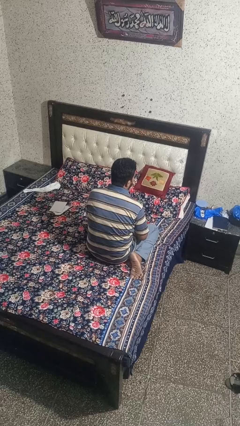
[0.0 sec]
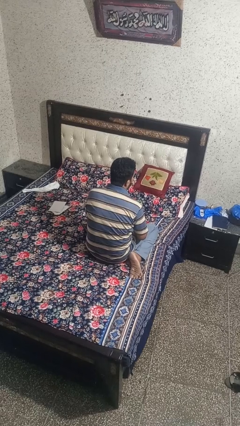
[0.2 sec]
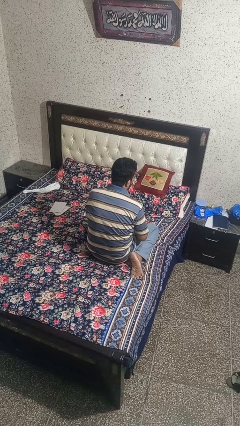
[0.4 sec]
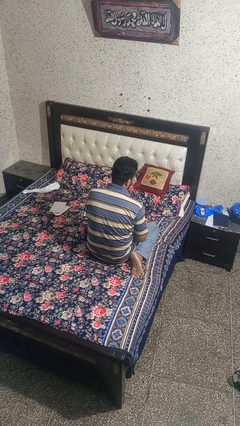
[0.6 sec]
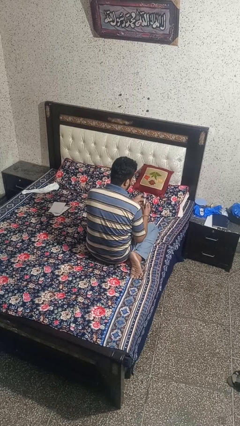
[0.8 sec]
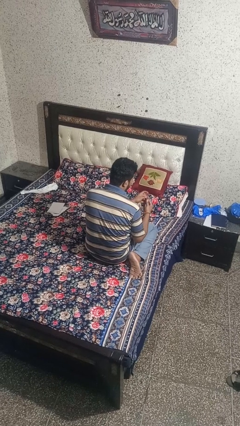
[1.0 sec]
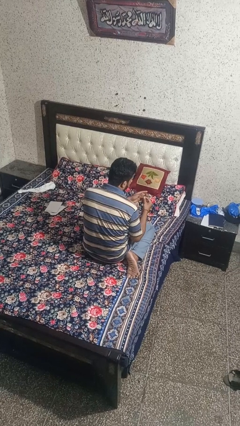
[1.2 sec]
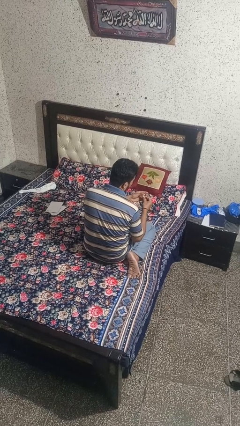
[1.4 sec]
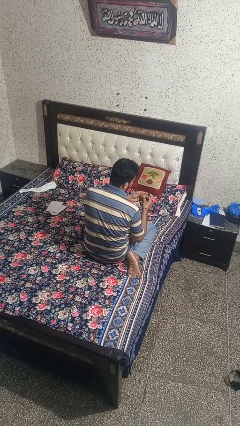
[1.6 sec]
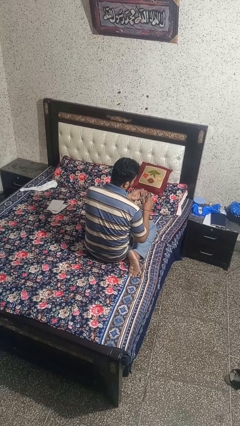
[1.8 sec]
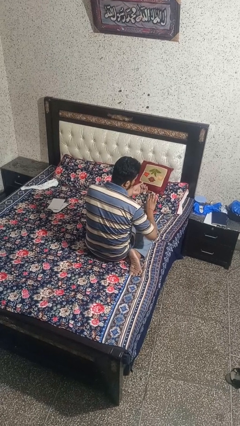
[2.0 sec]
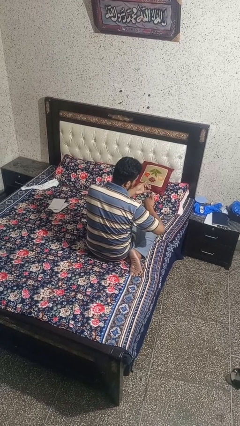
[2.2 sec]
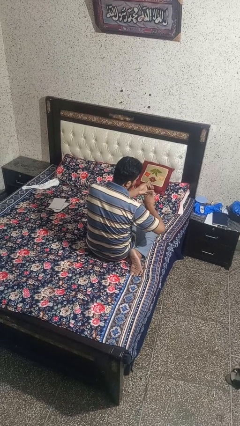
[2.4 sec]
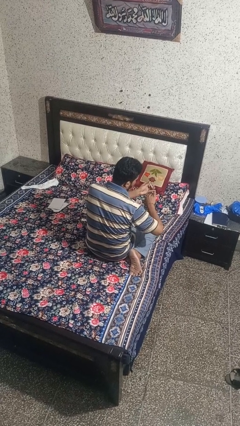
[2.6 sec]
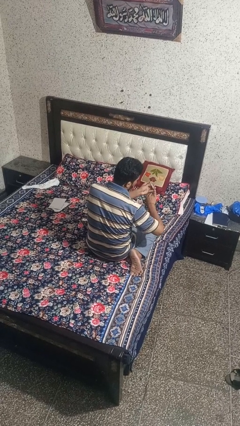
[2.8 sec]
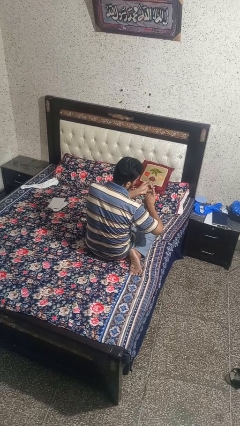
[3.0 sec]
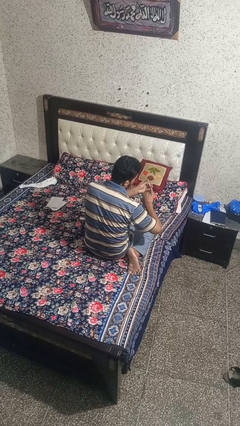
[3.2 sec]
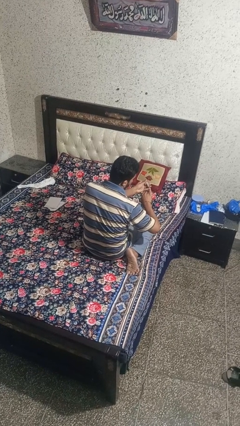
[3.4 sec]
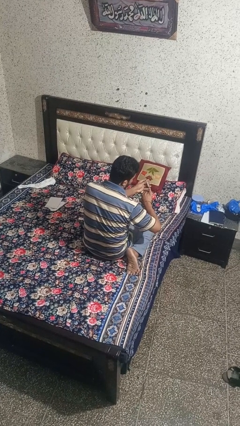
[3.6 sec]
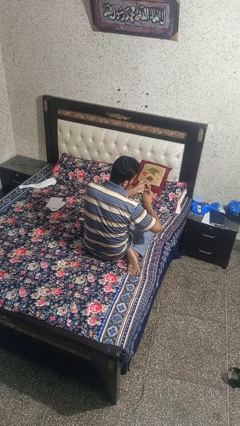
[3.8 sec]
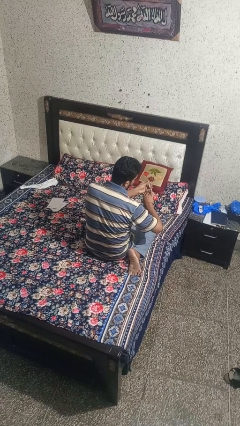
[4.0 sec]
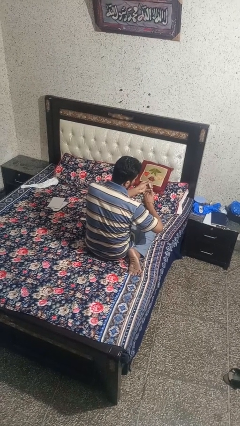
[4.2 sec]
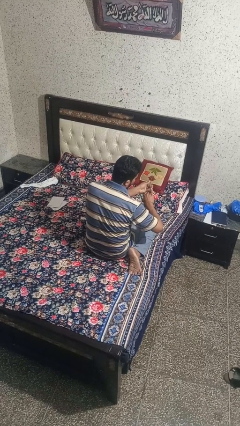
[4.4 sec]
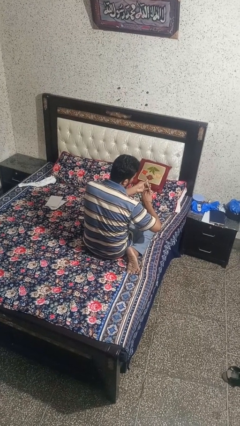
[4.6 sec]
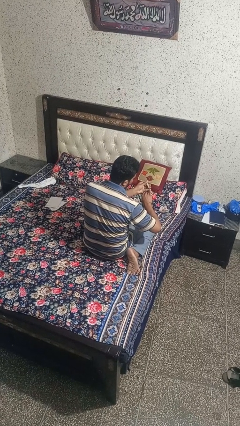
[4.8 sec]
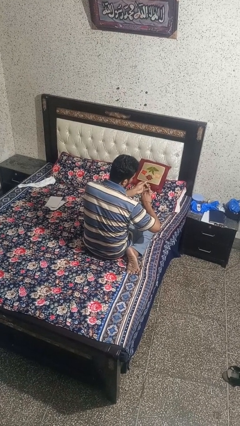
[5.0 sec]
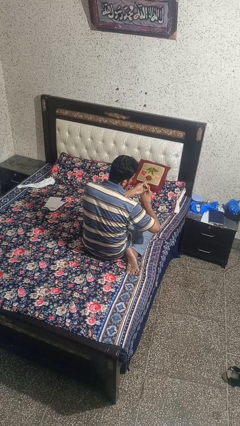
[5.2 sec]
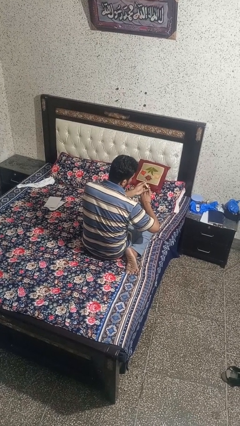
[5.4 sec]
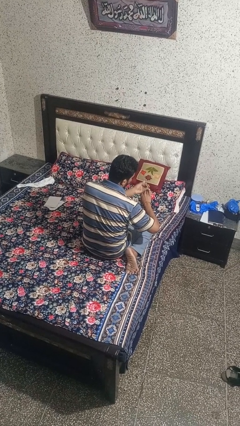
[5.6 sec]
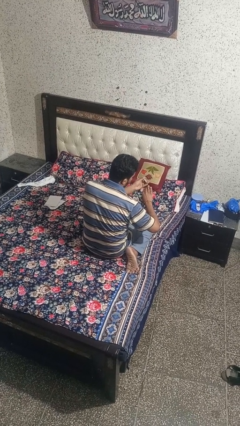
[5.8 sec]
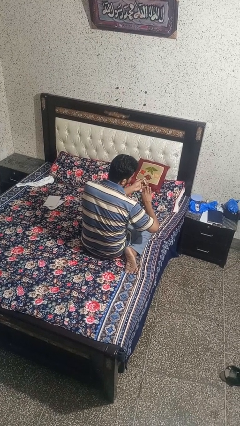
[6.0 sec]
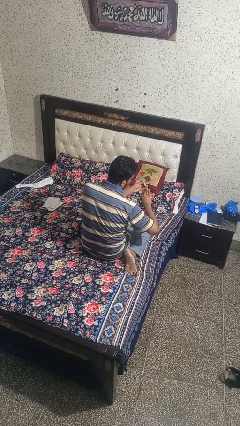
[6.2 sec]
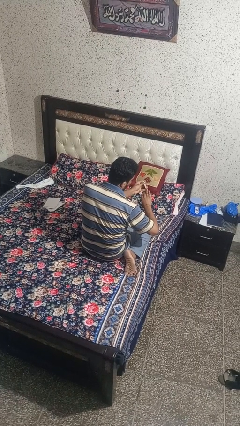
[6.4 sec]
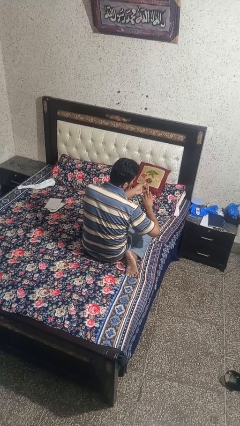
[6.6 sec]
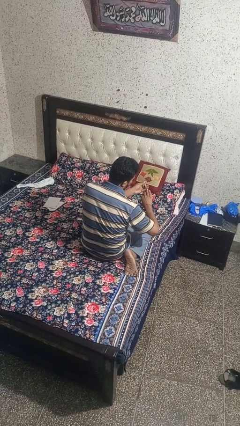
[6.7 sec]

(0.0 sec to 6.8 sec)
person clips fingernails

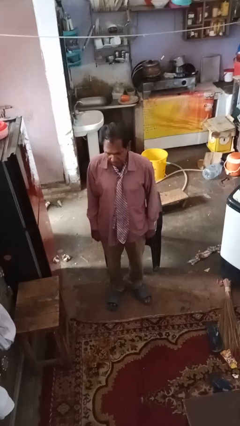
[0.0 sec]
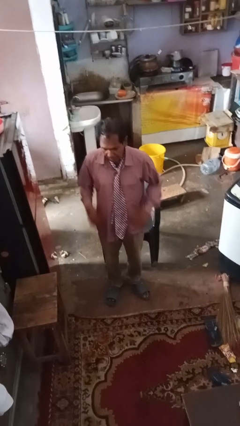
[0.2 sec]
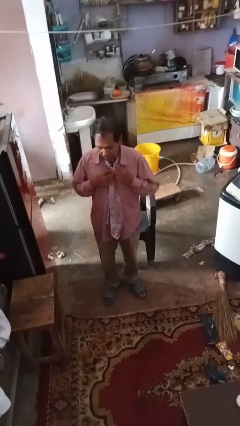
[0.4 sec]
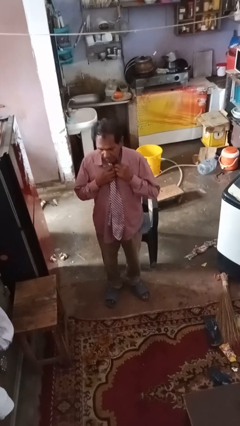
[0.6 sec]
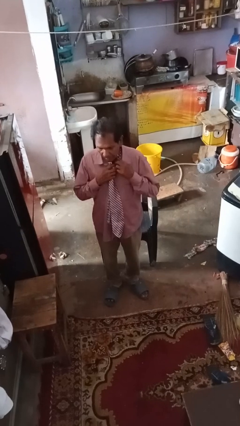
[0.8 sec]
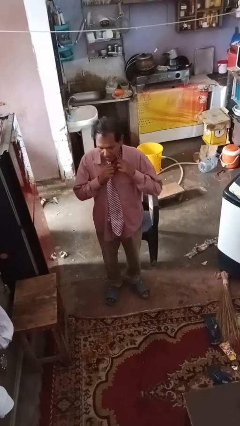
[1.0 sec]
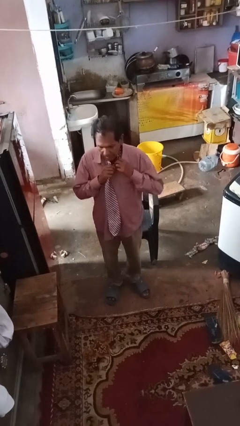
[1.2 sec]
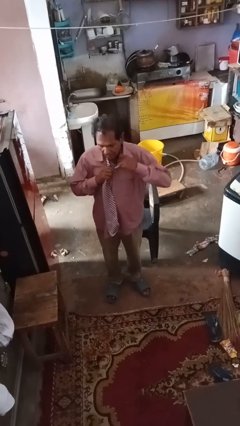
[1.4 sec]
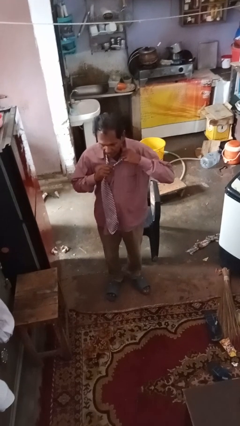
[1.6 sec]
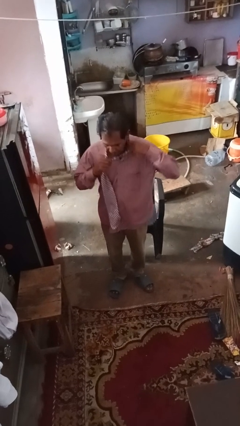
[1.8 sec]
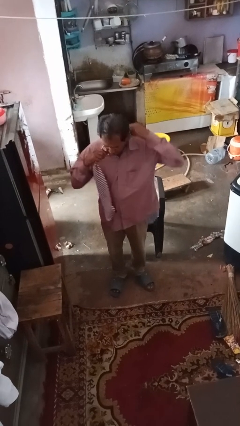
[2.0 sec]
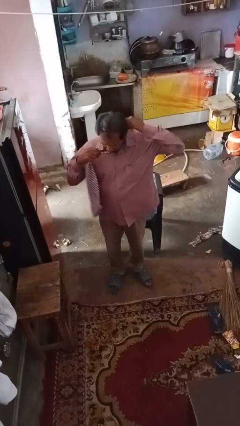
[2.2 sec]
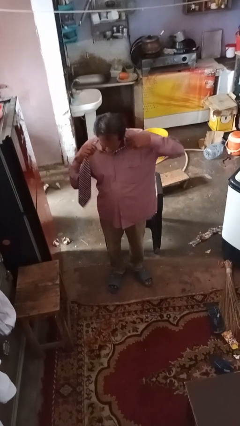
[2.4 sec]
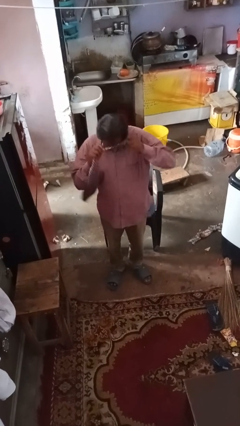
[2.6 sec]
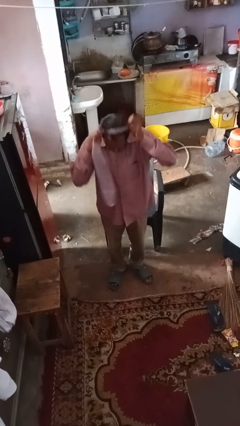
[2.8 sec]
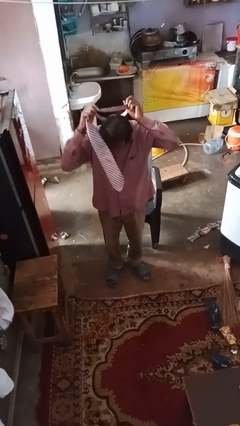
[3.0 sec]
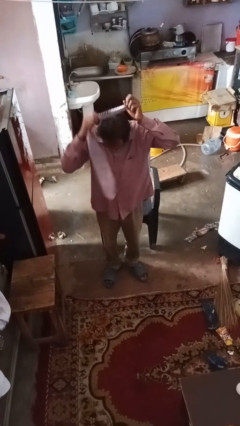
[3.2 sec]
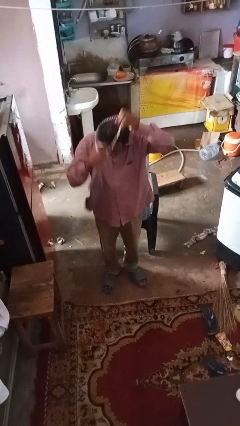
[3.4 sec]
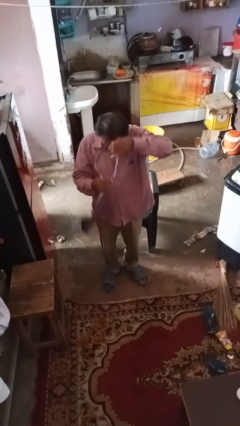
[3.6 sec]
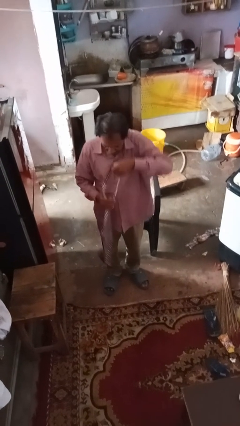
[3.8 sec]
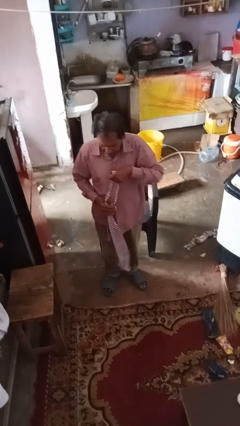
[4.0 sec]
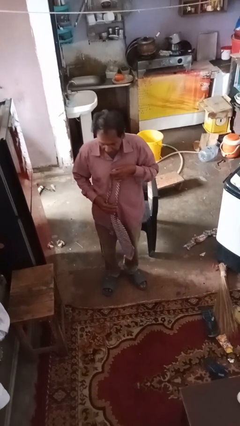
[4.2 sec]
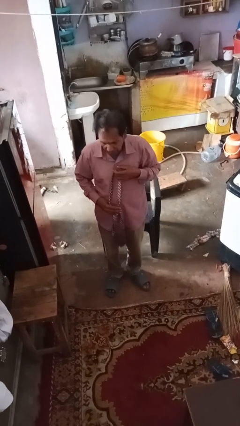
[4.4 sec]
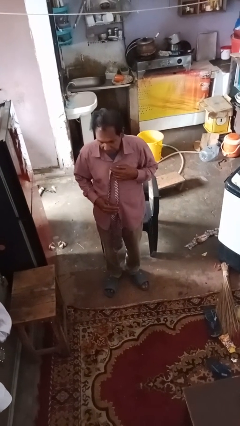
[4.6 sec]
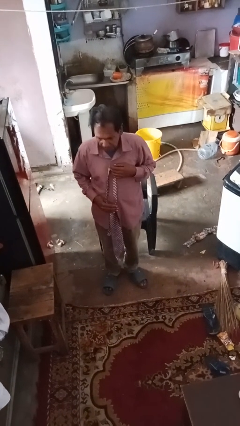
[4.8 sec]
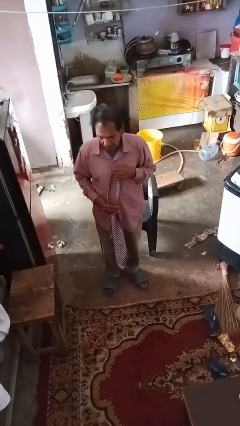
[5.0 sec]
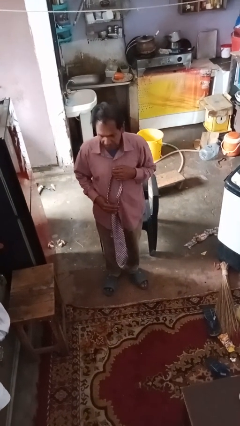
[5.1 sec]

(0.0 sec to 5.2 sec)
person takes off necktie

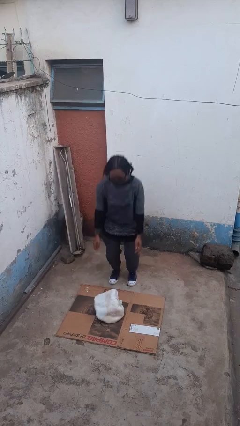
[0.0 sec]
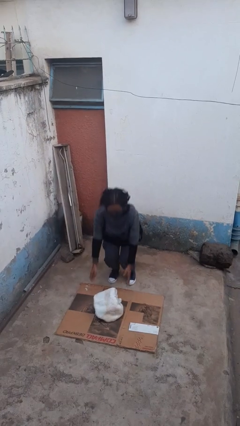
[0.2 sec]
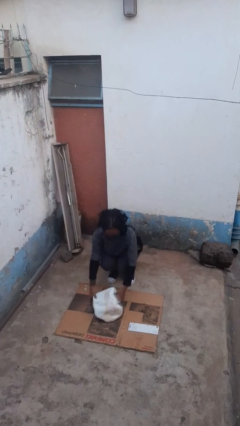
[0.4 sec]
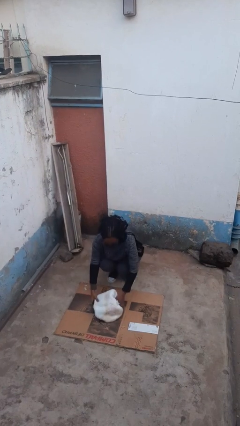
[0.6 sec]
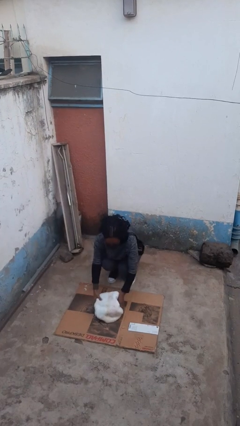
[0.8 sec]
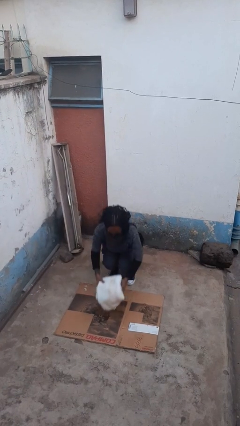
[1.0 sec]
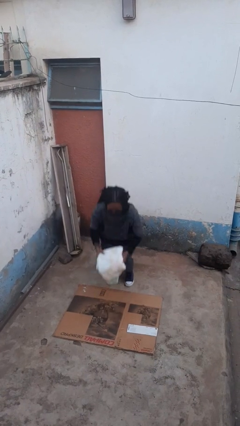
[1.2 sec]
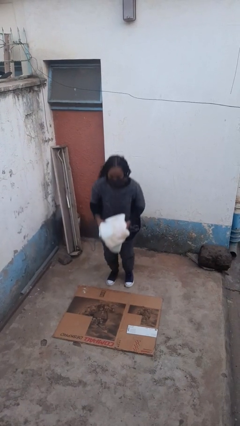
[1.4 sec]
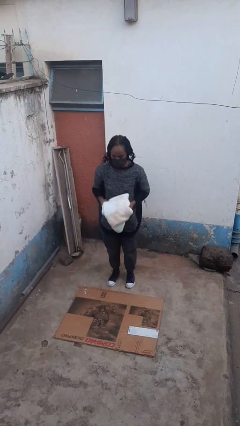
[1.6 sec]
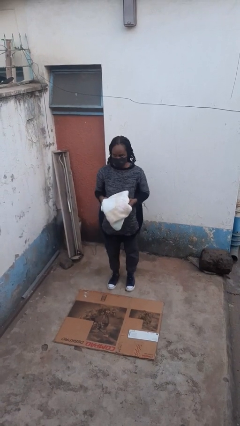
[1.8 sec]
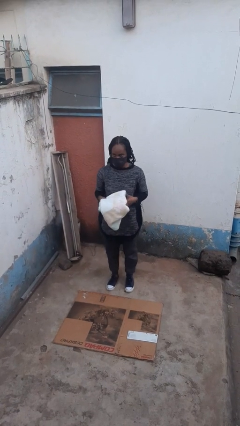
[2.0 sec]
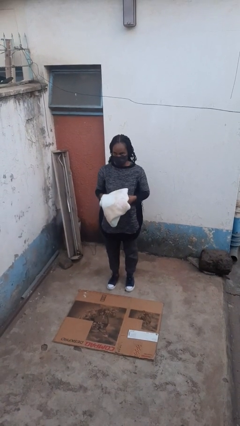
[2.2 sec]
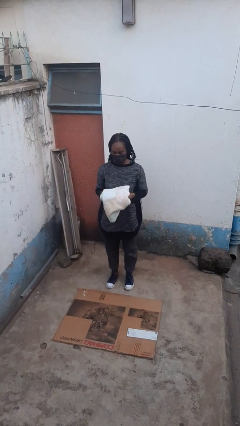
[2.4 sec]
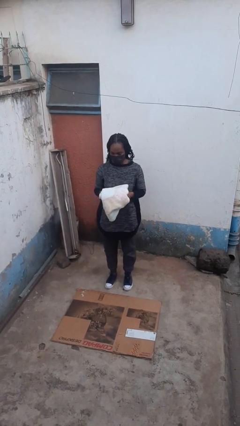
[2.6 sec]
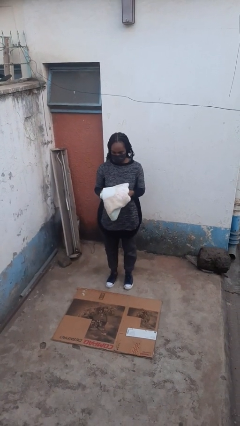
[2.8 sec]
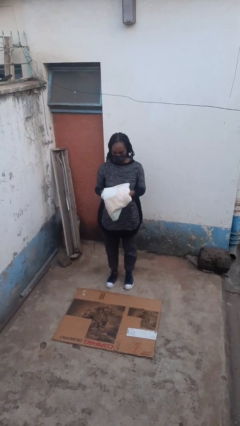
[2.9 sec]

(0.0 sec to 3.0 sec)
person picks up object from floor

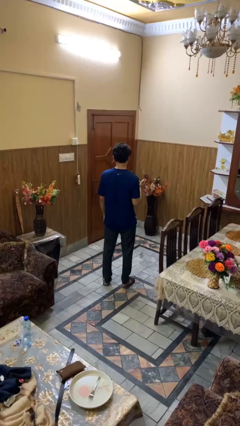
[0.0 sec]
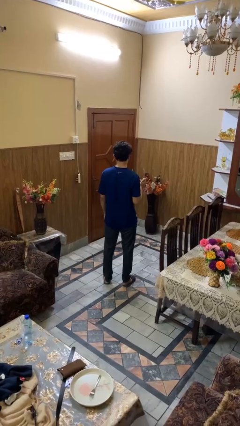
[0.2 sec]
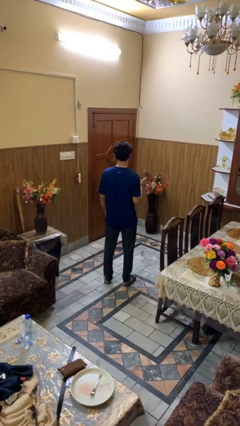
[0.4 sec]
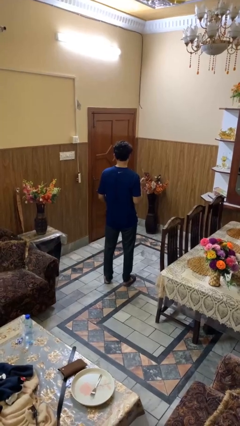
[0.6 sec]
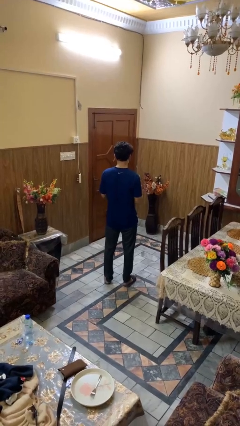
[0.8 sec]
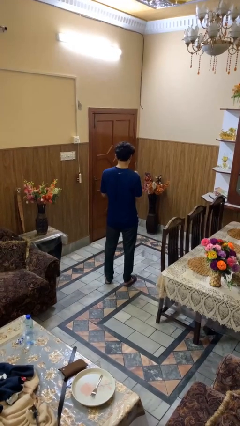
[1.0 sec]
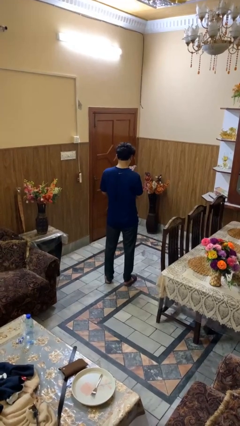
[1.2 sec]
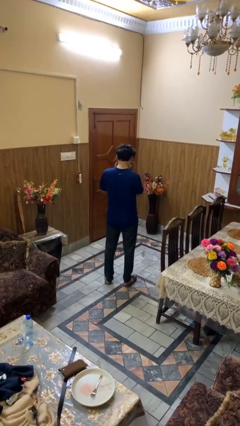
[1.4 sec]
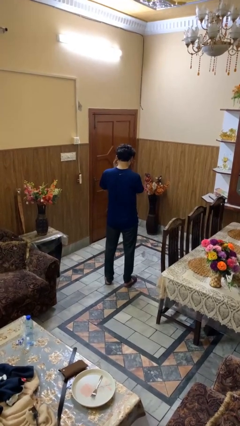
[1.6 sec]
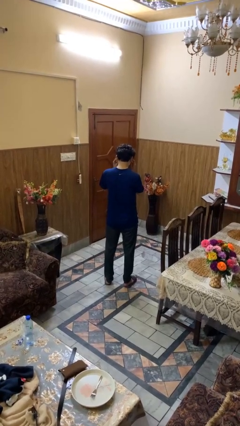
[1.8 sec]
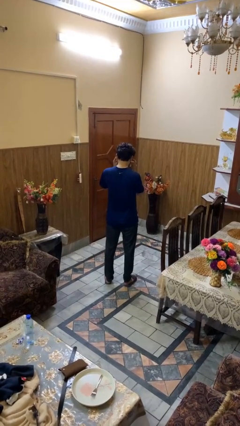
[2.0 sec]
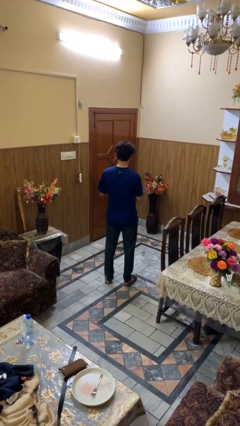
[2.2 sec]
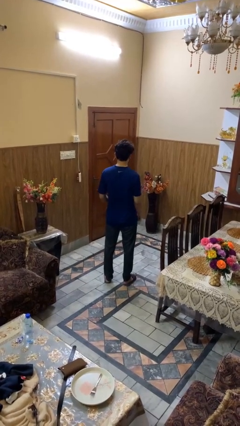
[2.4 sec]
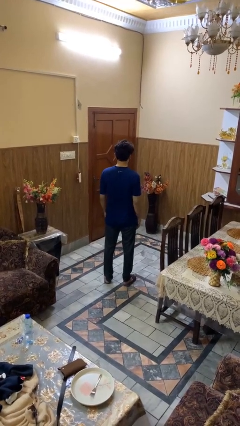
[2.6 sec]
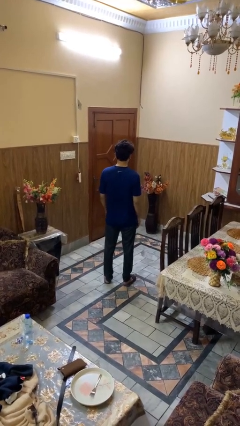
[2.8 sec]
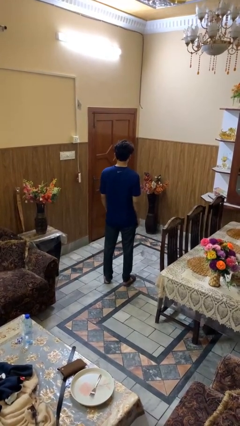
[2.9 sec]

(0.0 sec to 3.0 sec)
person puts on sunglasses
